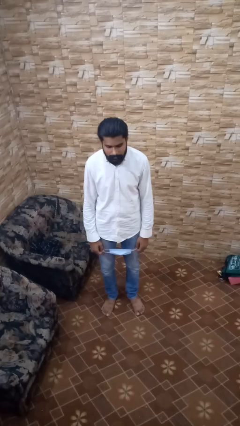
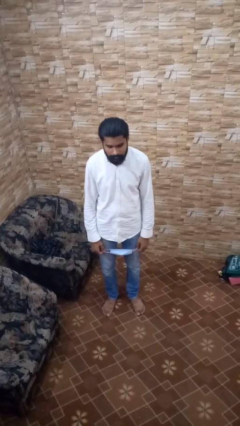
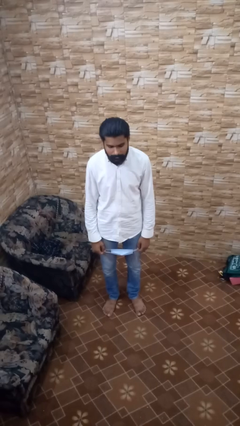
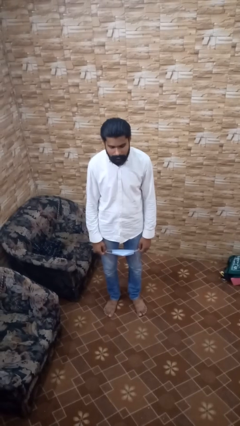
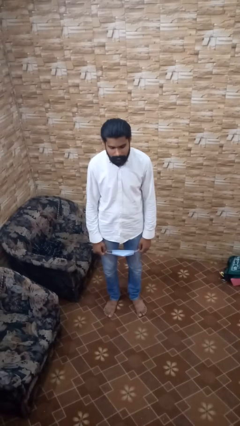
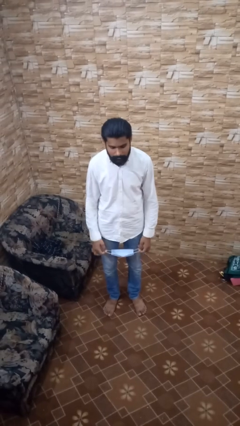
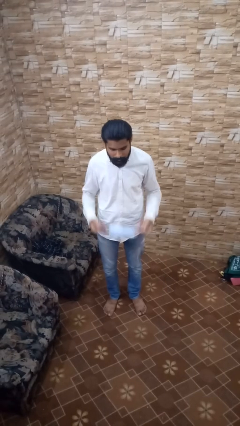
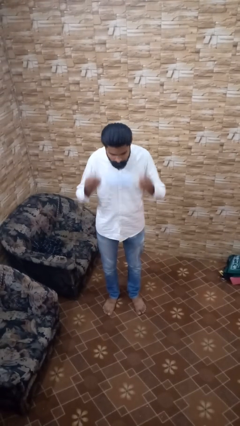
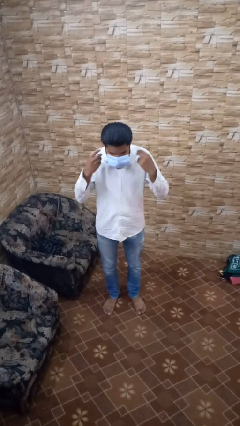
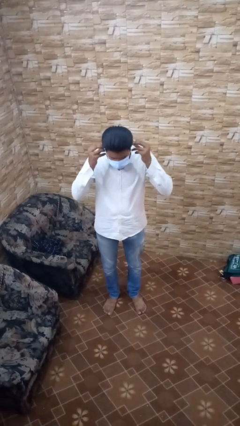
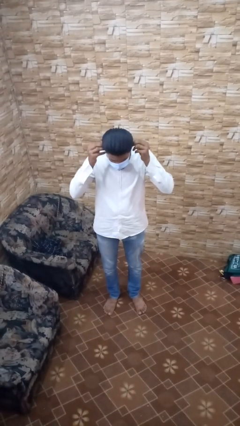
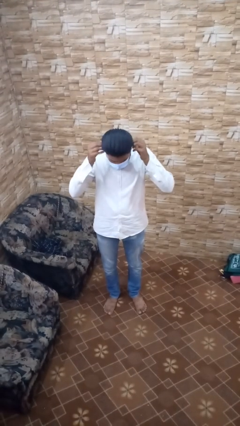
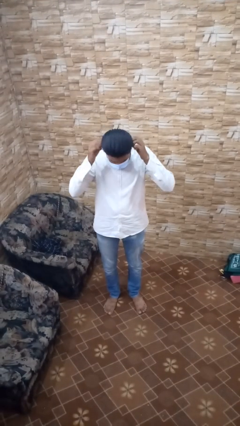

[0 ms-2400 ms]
person puts on facemask

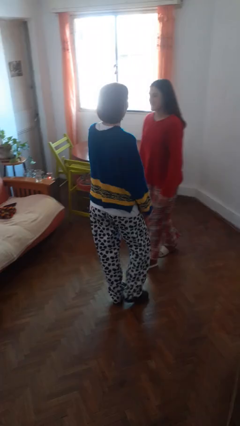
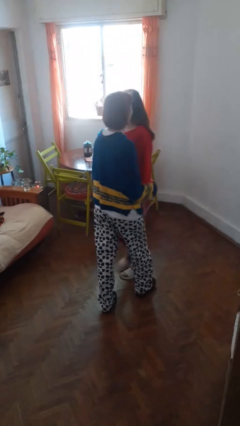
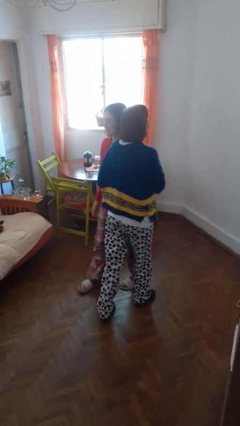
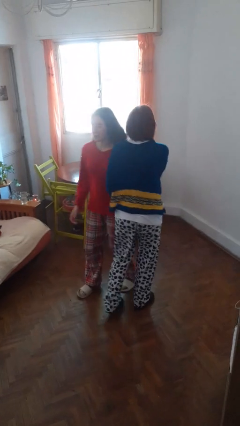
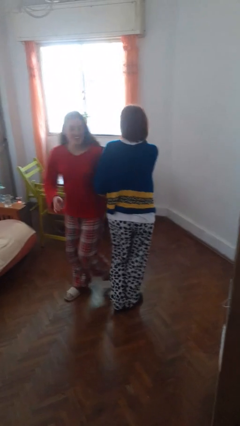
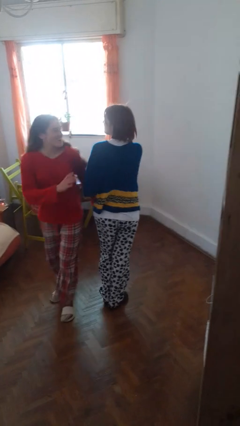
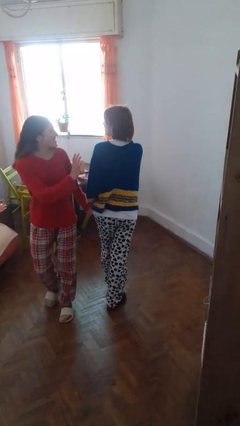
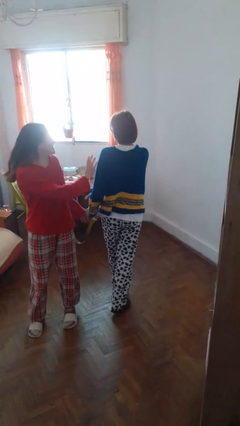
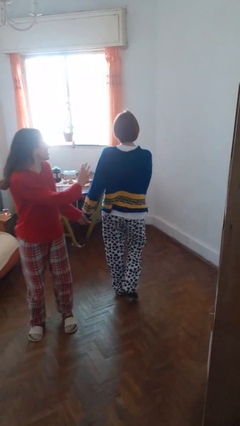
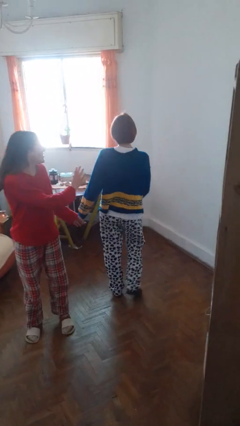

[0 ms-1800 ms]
person bumps into person

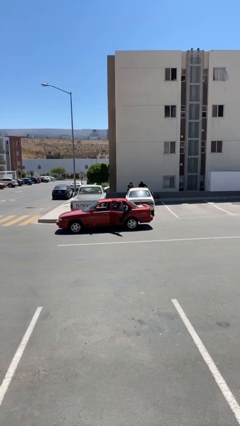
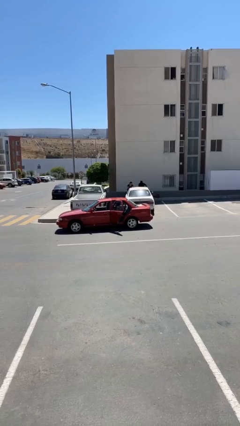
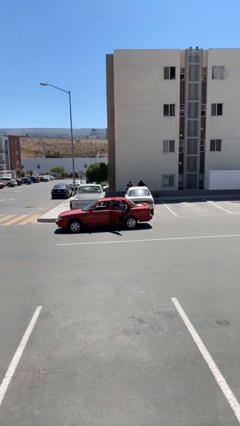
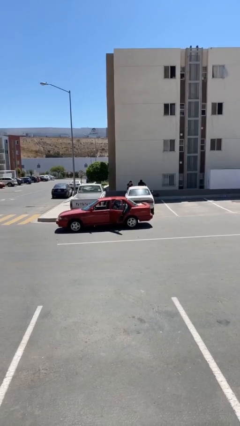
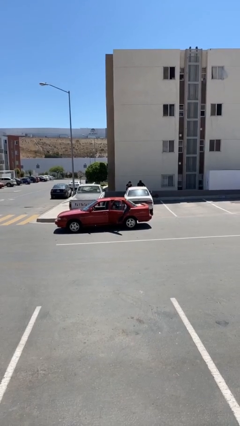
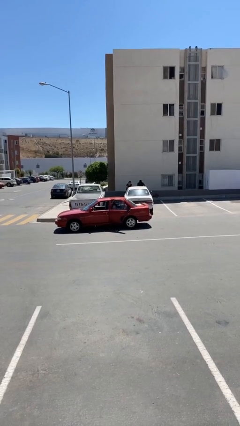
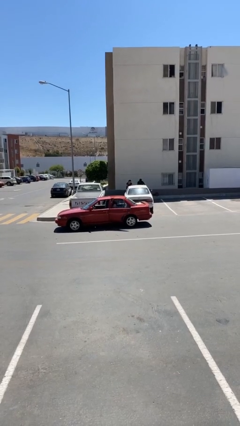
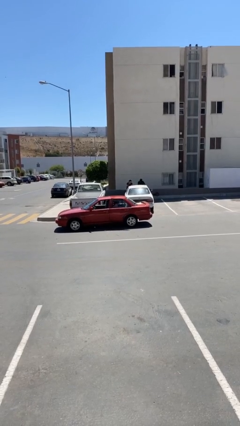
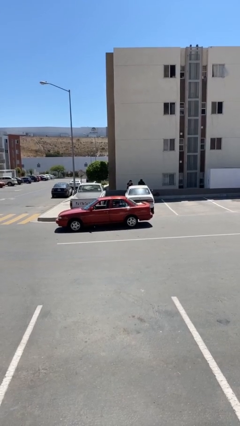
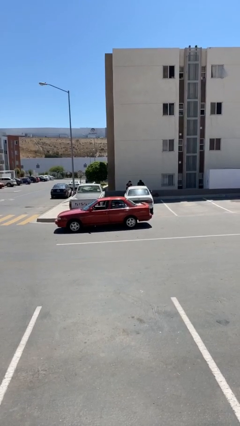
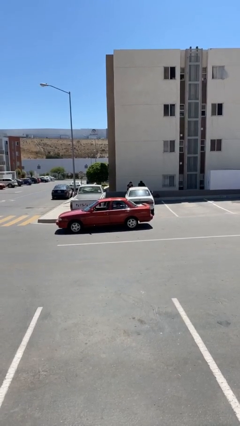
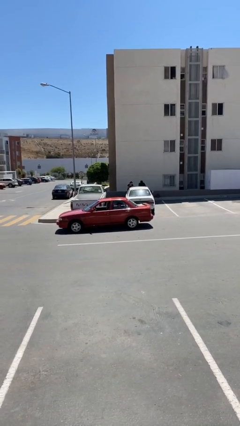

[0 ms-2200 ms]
person closes car door

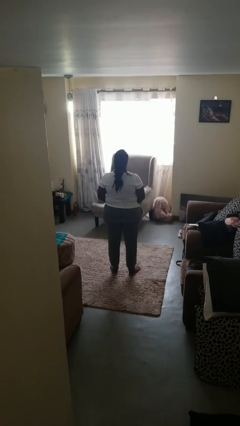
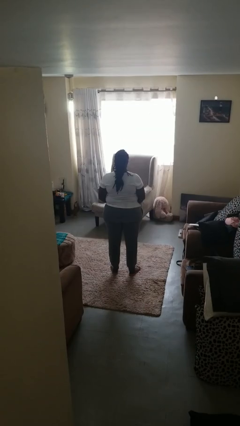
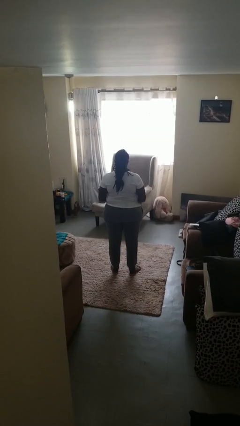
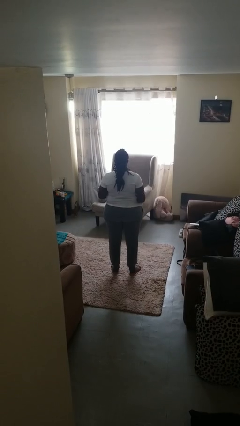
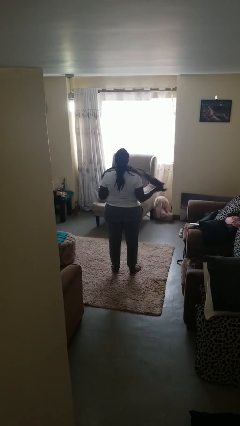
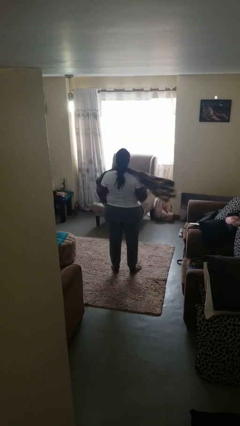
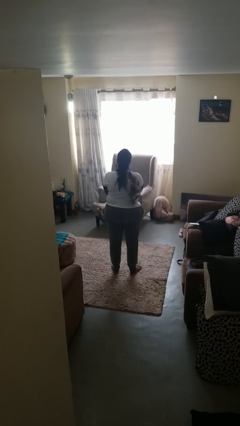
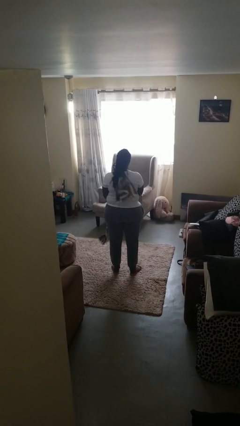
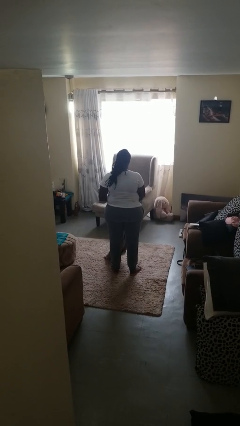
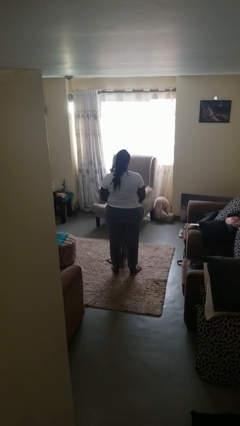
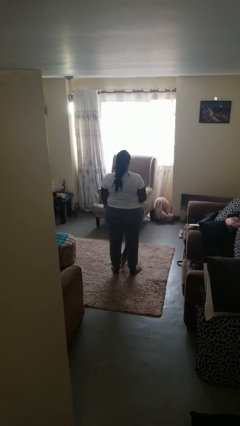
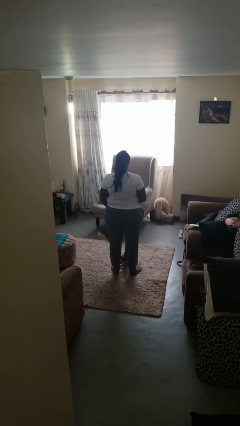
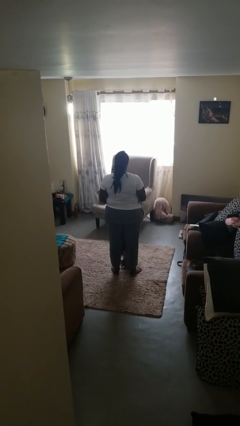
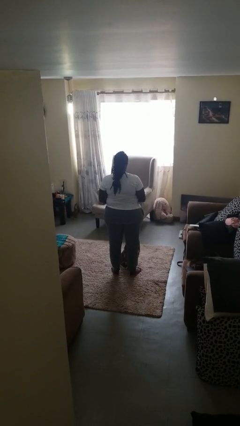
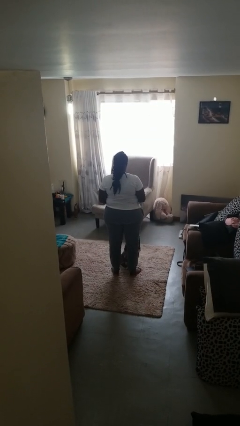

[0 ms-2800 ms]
person takes off scarf

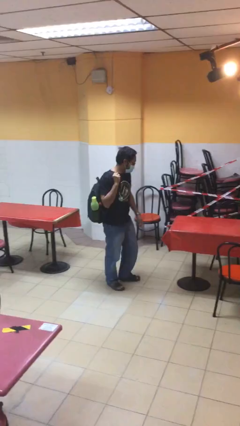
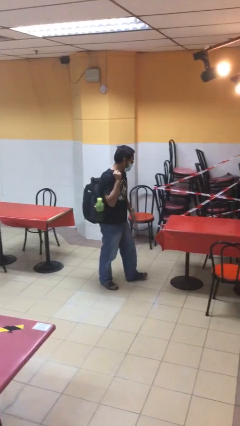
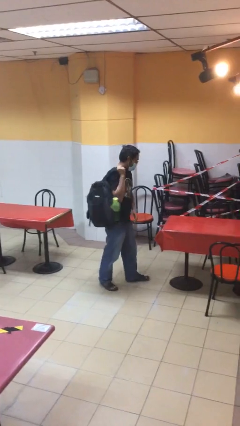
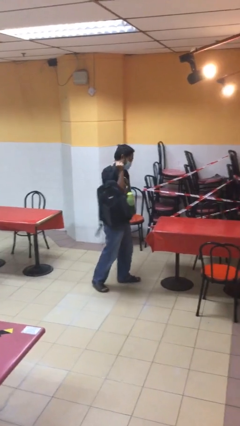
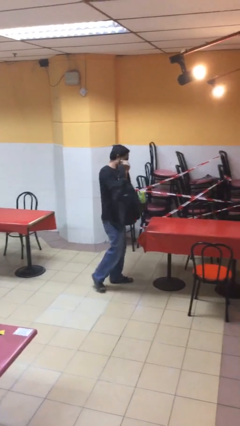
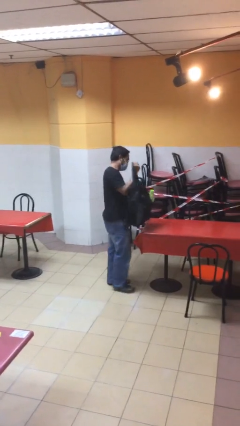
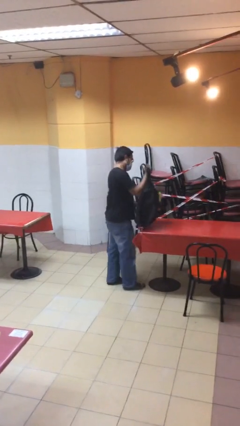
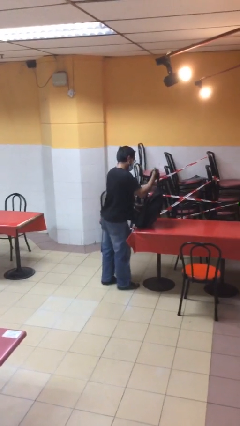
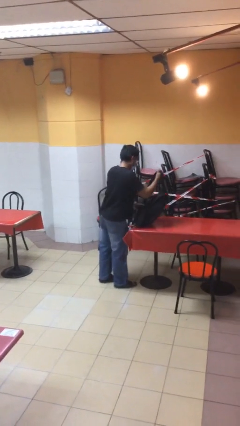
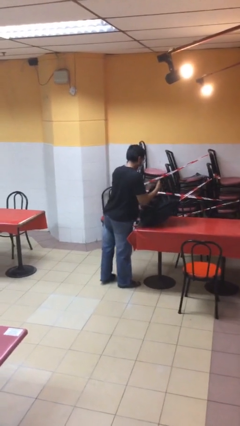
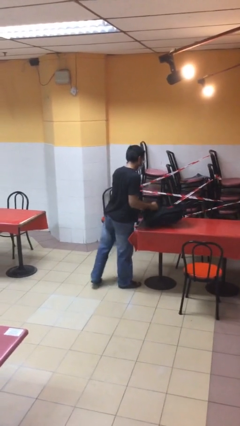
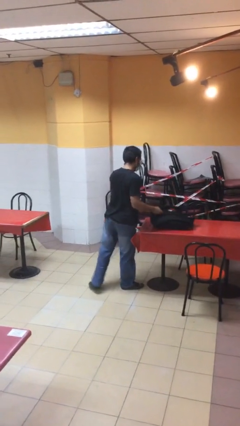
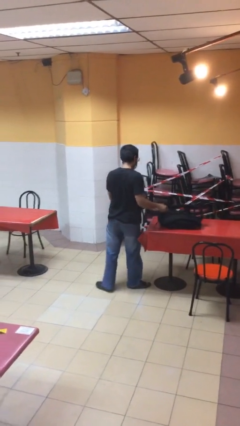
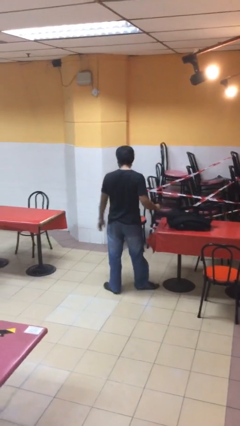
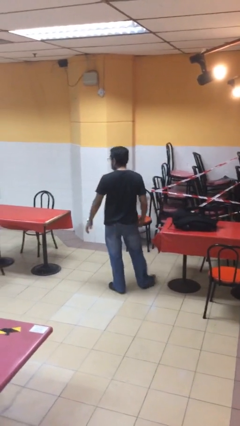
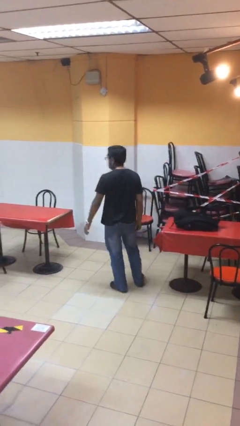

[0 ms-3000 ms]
person puts down object on table

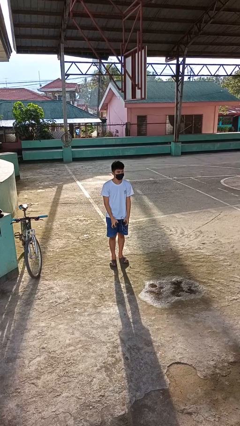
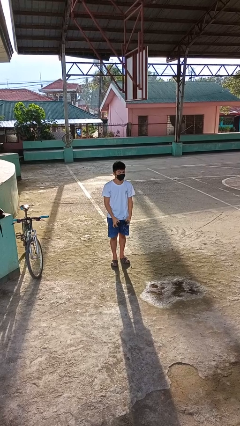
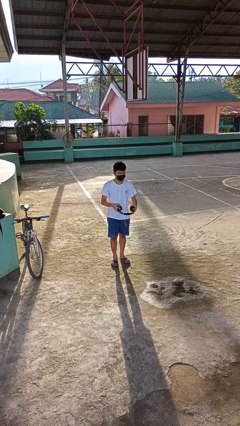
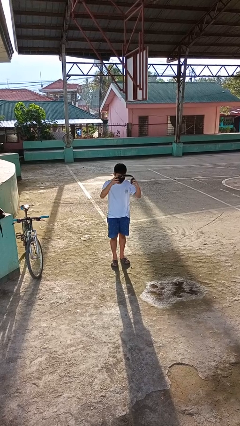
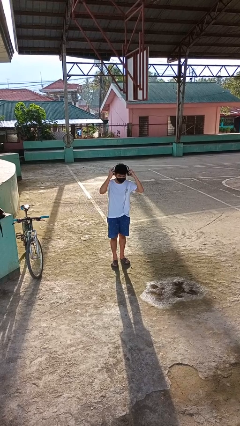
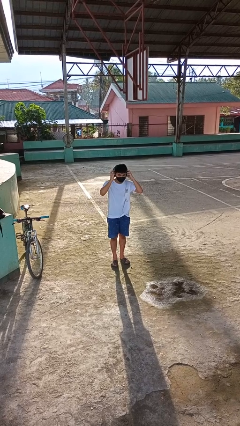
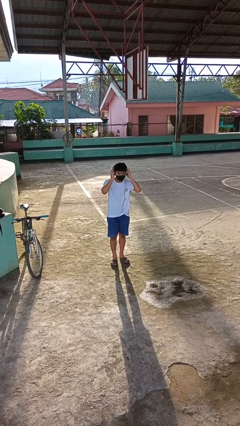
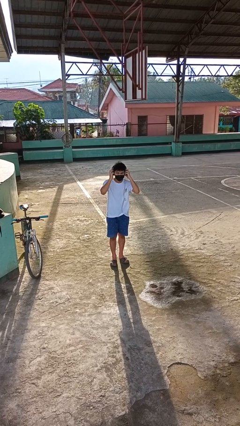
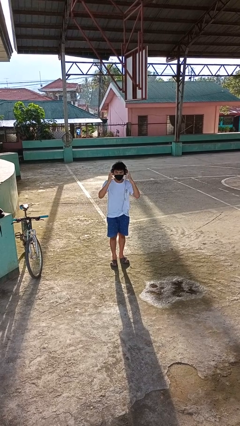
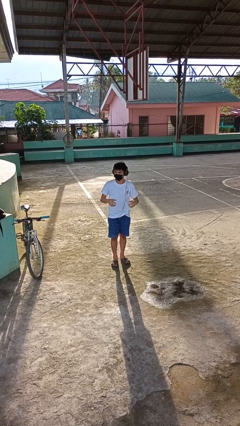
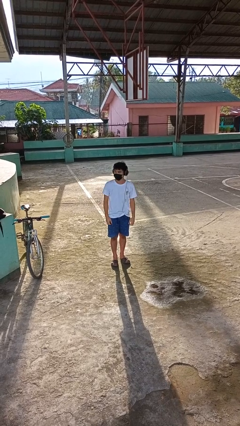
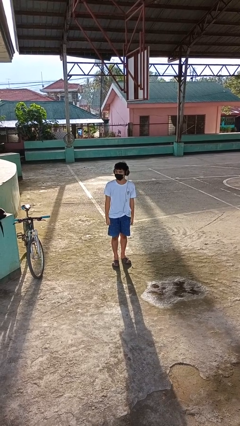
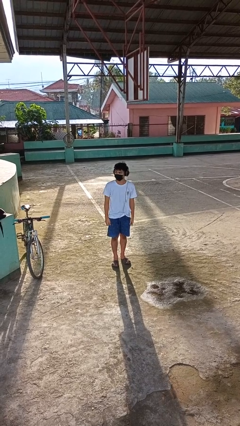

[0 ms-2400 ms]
person puts on headphones

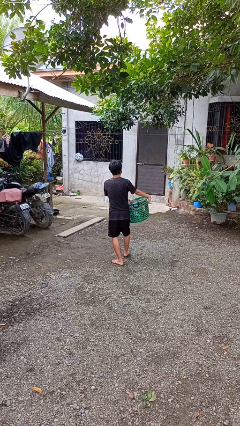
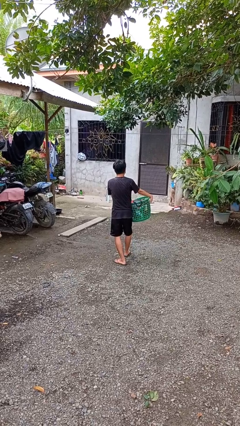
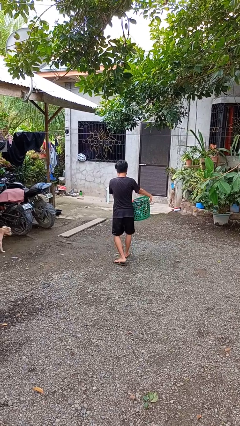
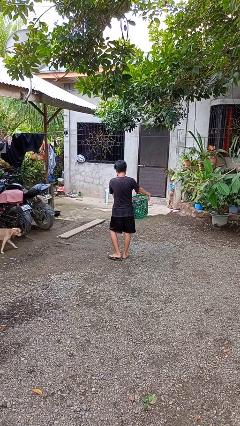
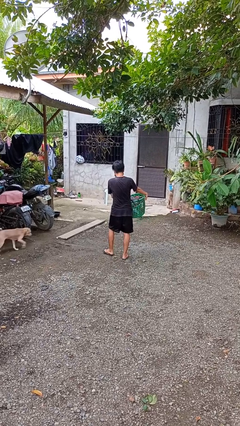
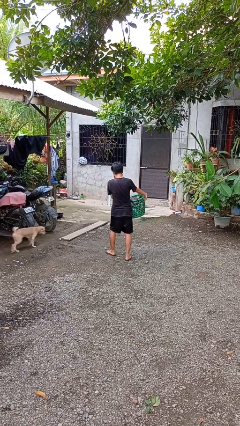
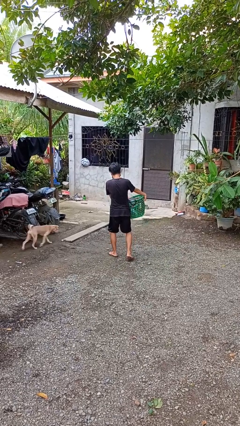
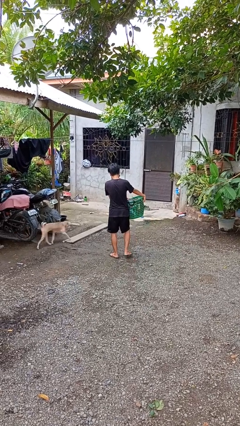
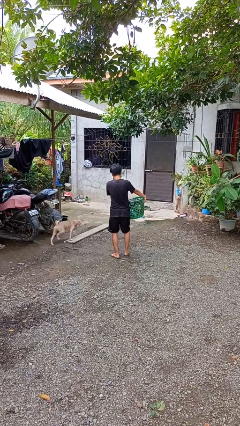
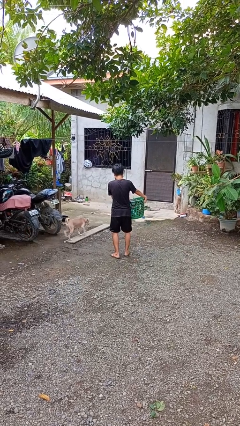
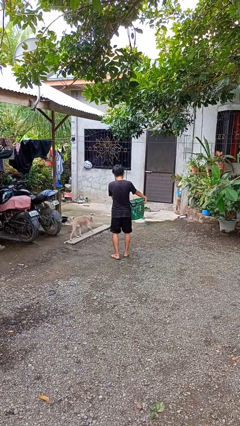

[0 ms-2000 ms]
person carries laundry basket

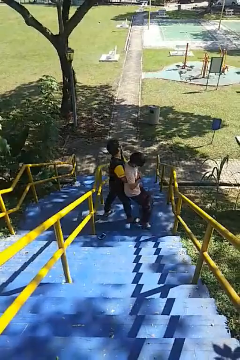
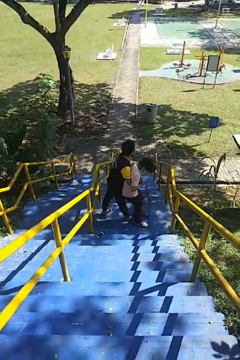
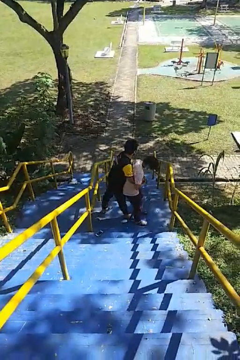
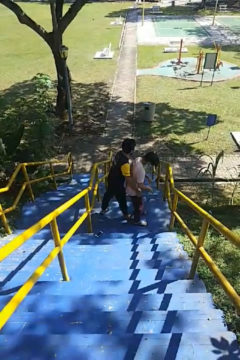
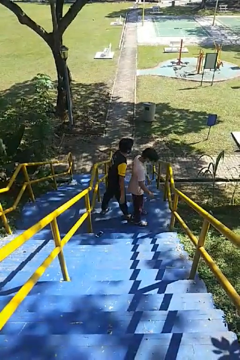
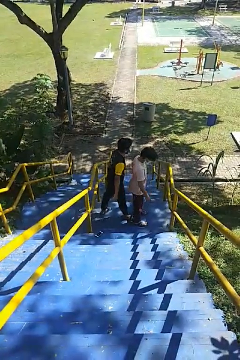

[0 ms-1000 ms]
person puts down person
